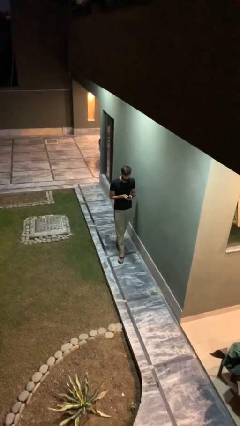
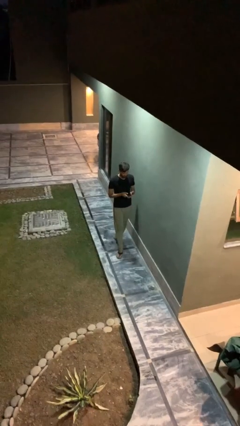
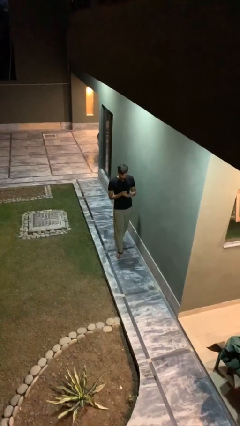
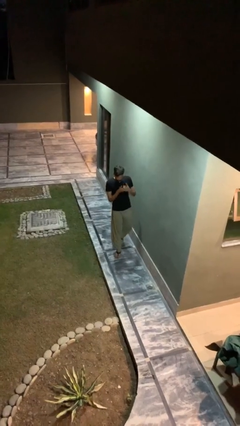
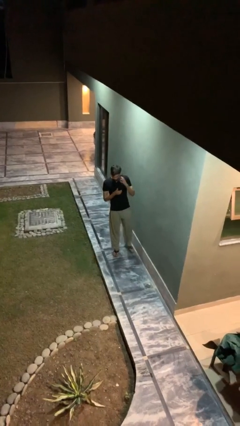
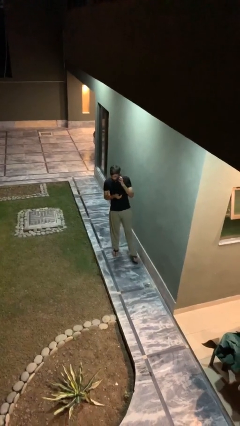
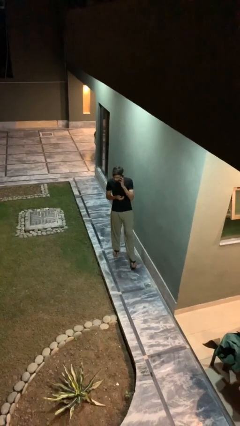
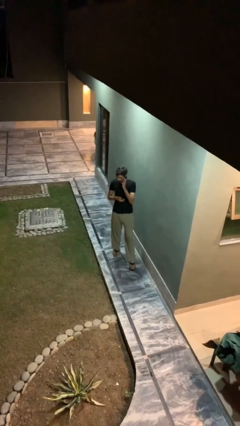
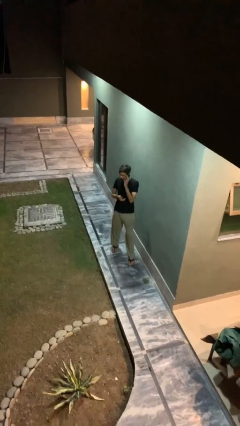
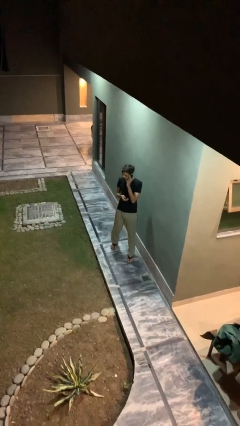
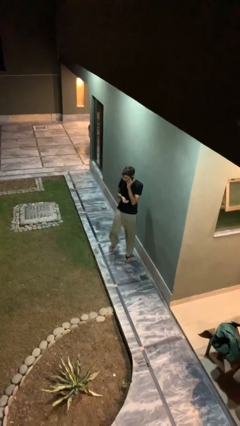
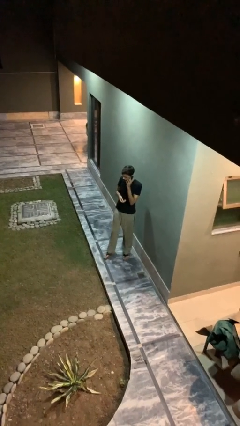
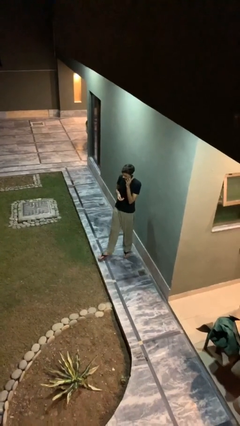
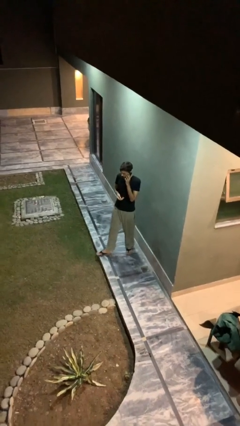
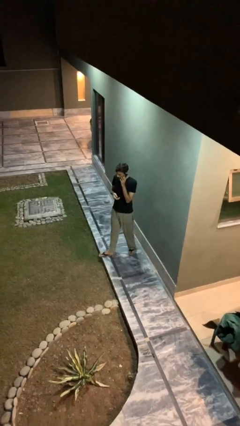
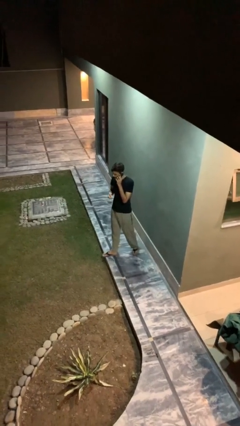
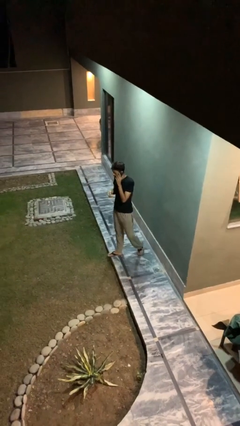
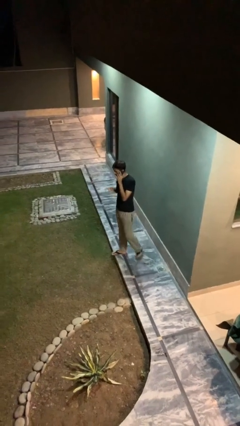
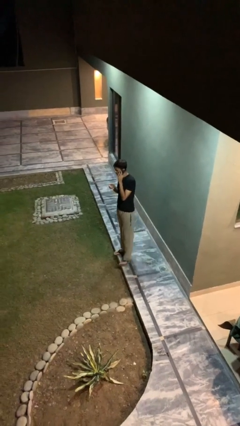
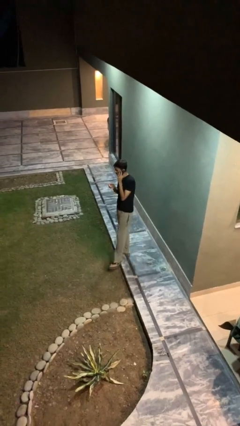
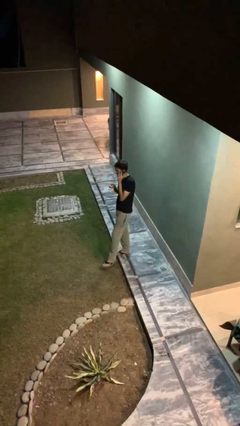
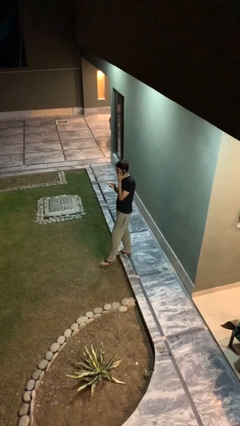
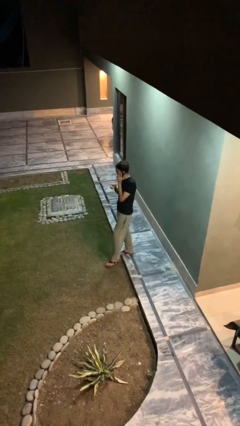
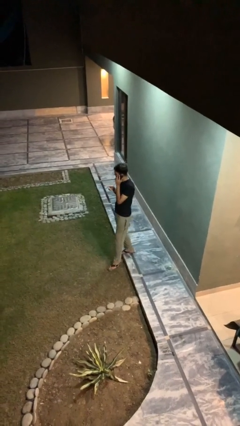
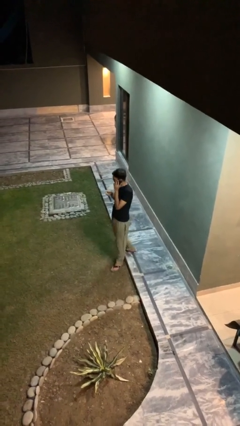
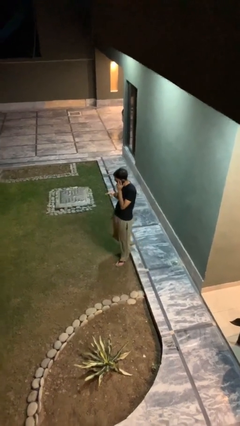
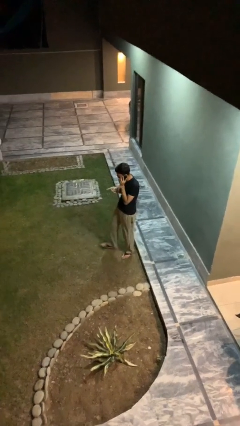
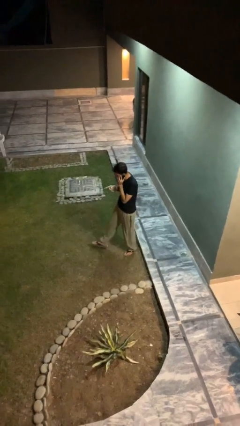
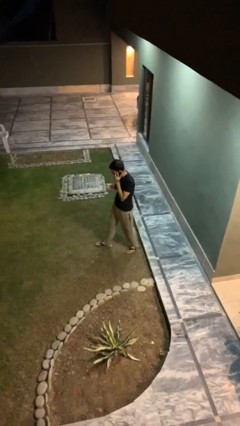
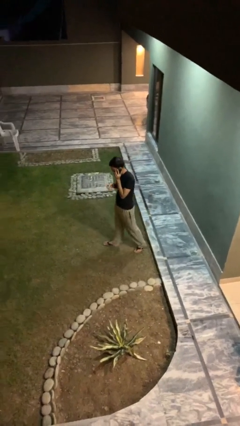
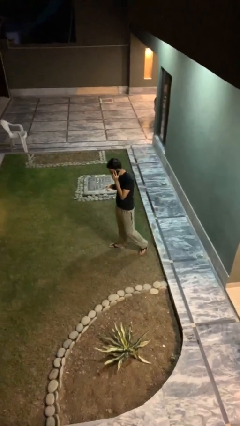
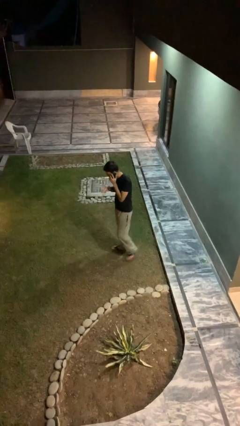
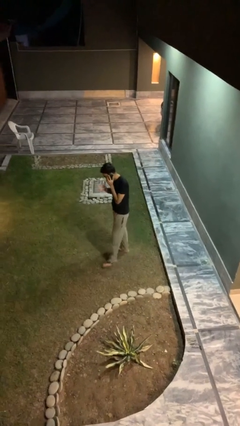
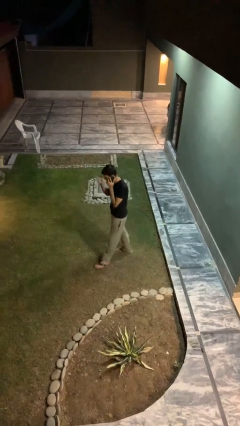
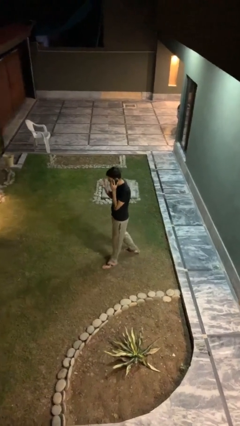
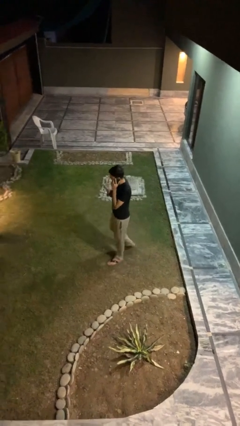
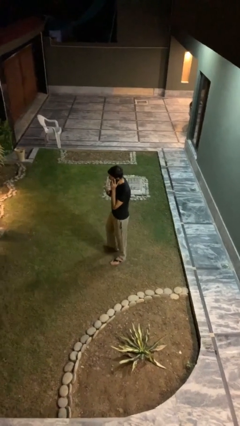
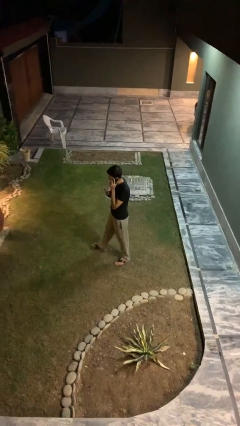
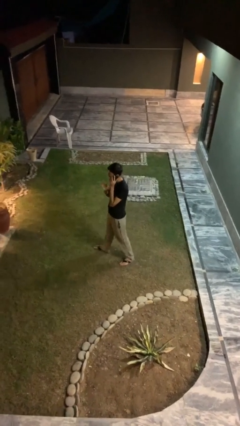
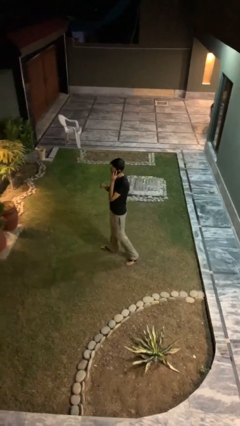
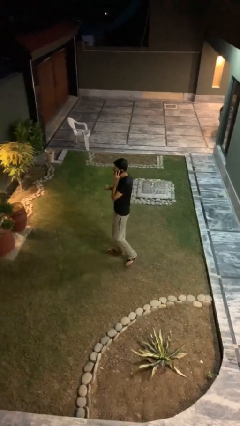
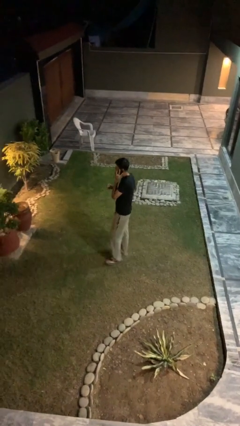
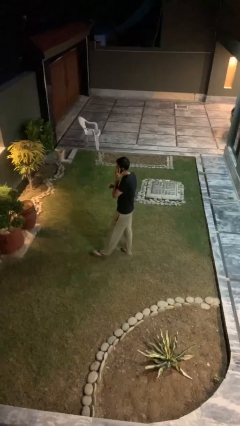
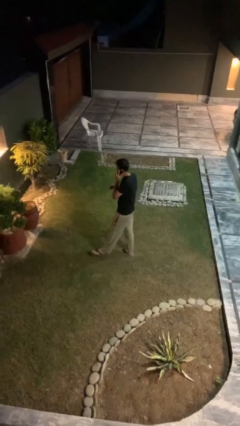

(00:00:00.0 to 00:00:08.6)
person talks on phone

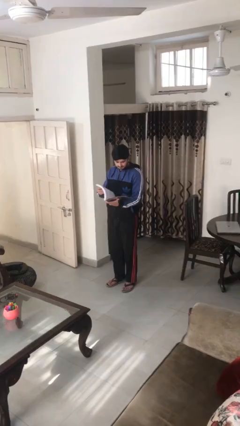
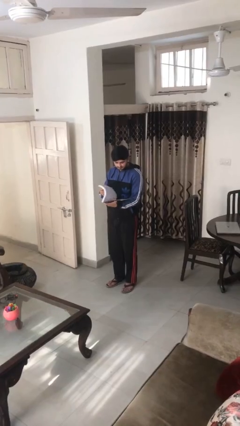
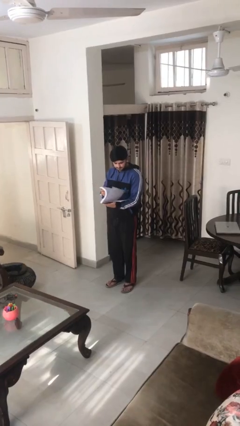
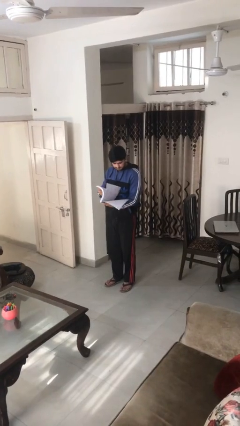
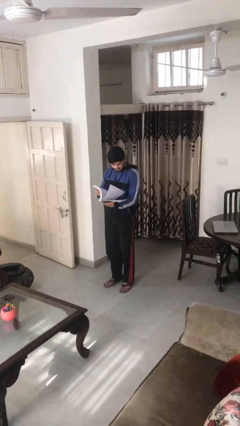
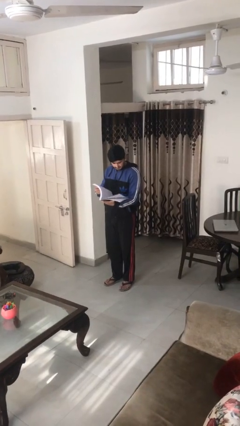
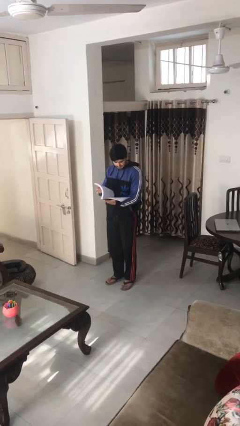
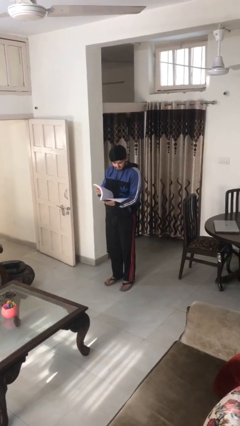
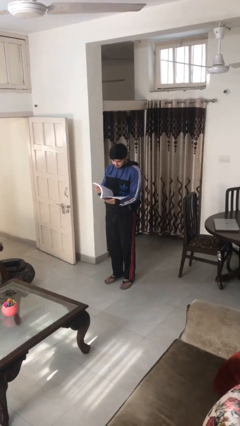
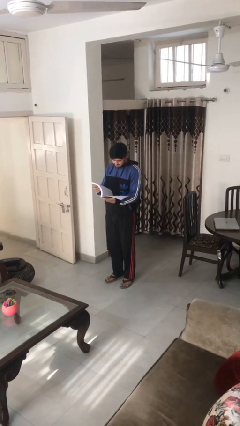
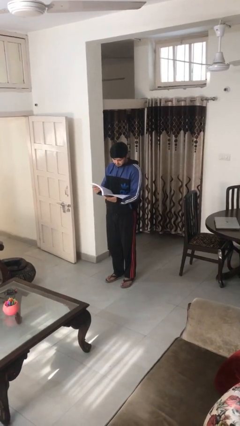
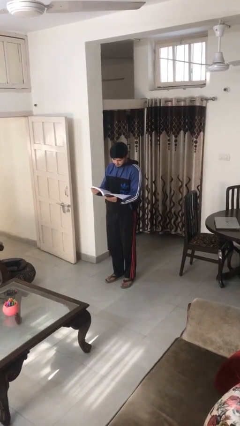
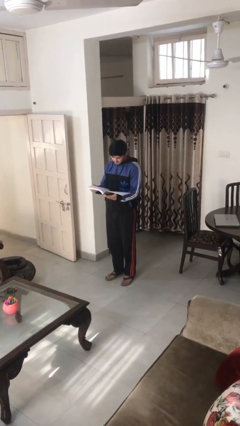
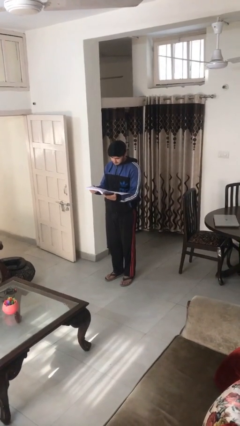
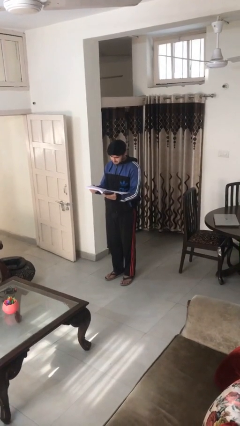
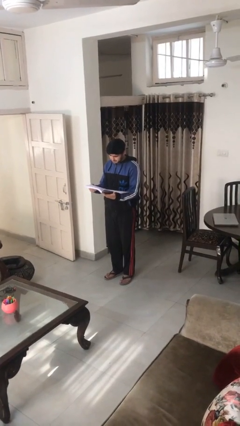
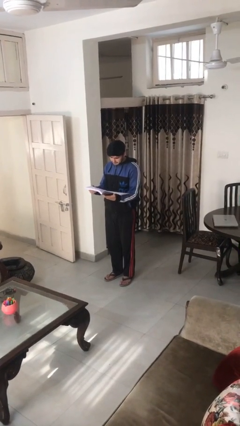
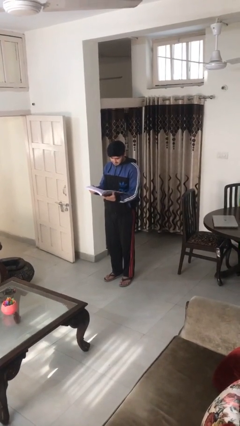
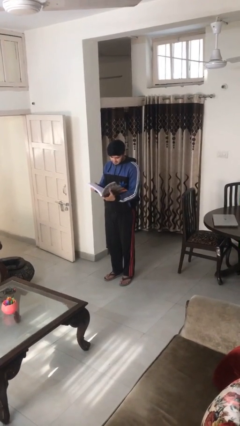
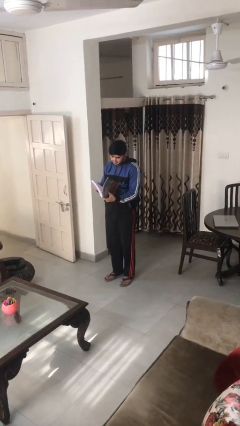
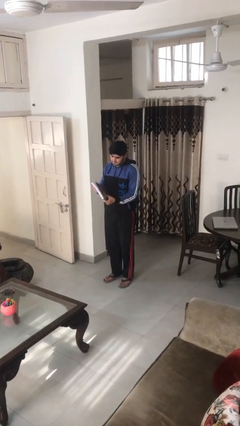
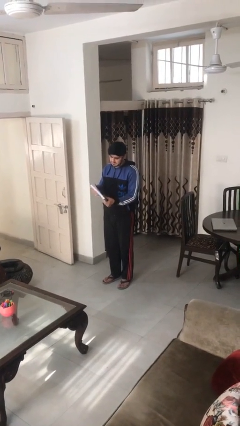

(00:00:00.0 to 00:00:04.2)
person reads document

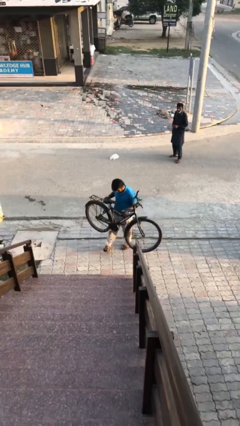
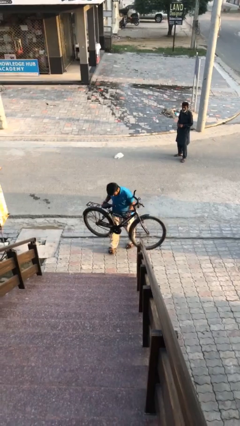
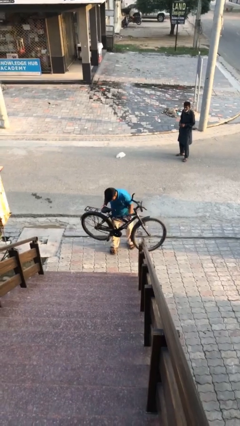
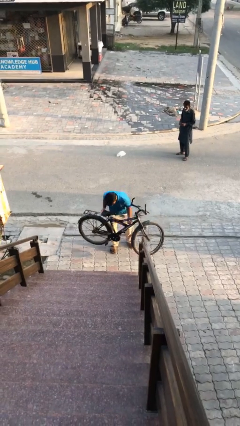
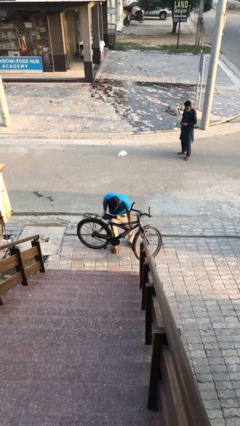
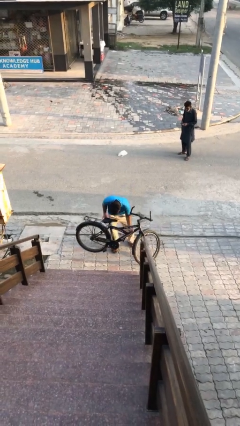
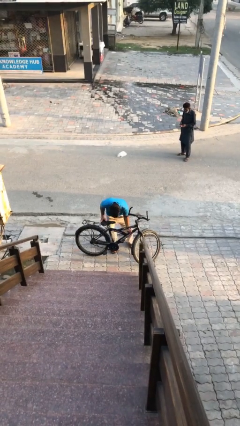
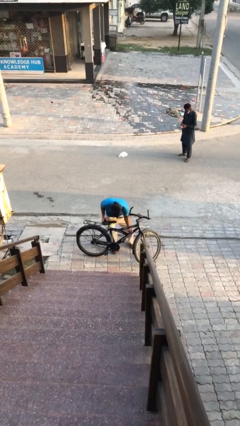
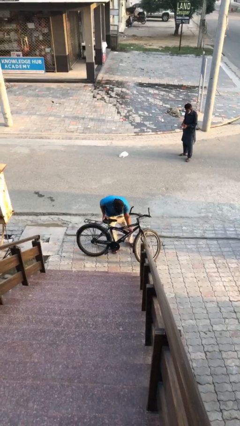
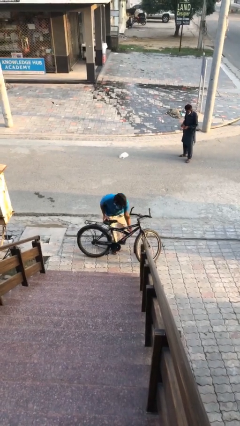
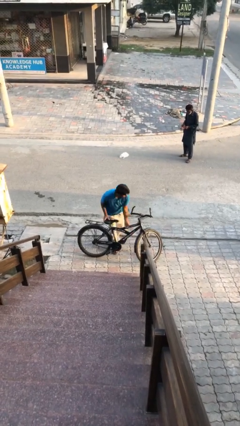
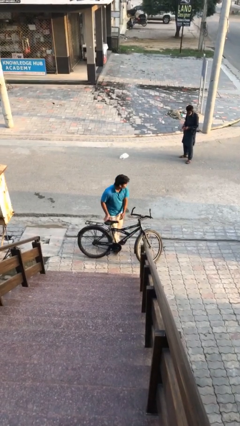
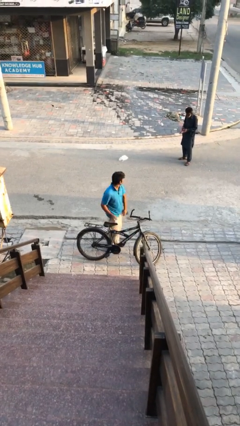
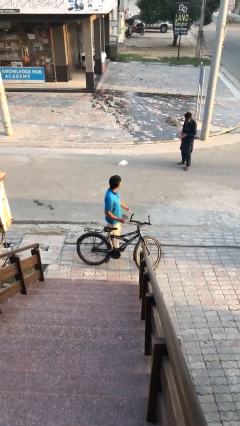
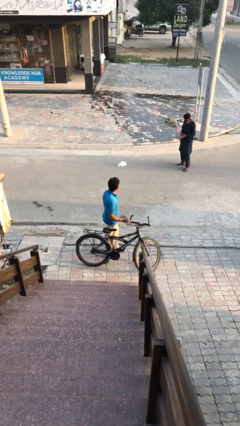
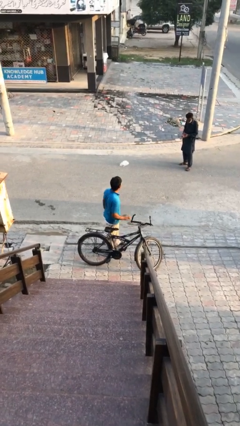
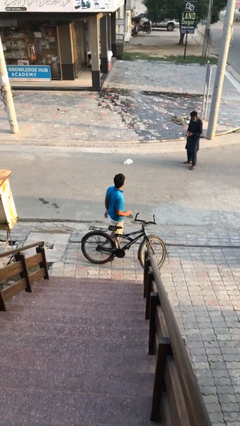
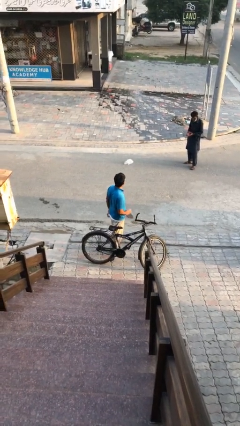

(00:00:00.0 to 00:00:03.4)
person puts down object on floor

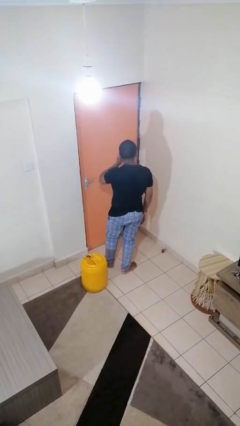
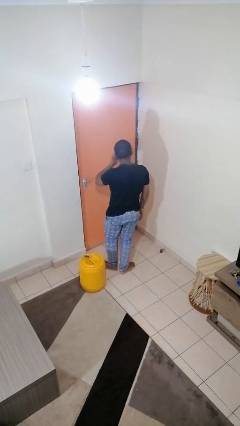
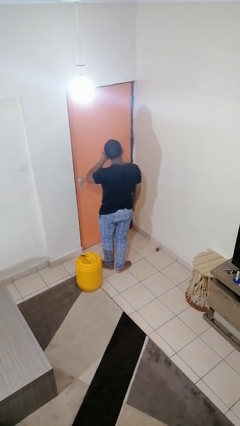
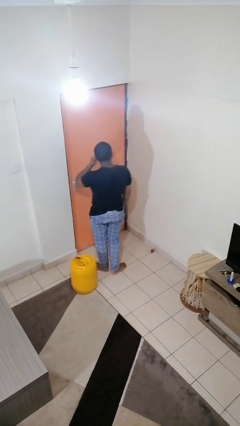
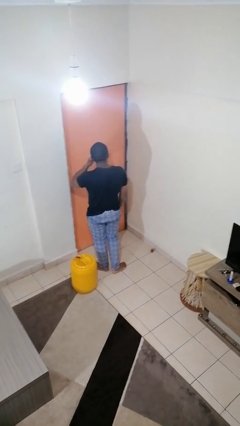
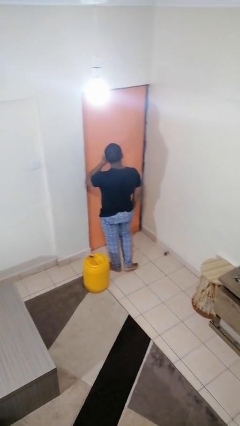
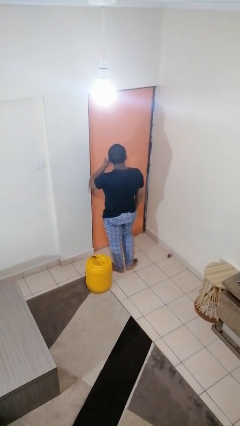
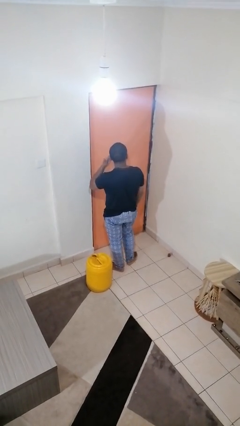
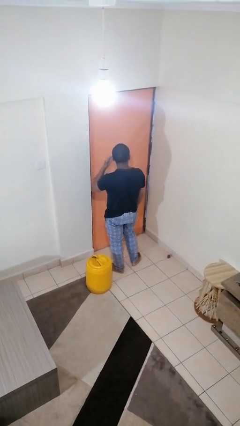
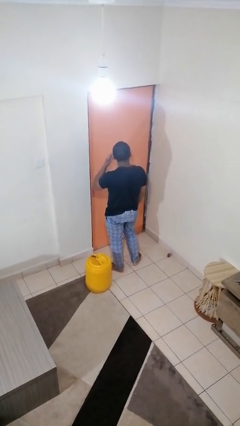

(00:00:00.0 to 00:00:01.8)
person rubs eyes
